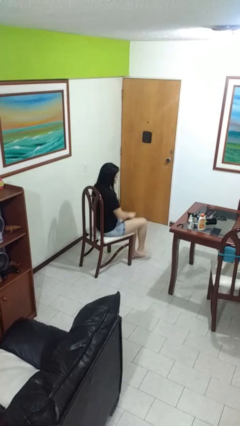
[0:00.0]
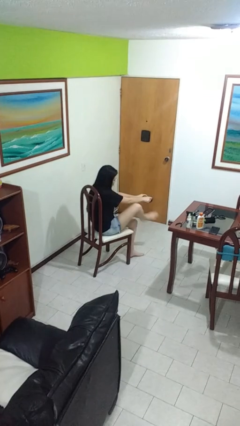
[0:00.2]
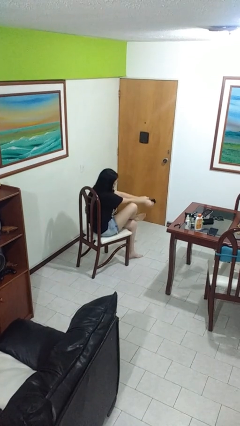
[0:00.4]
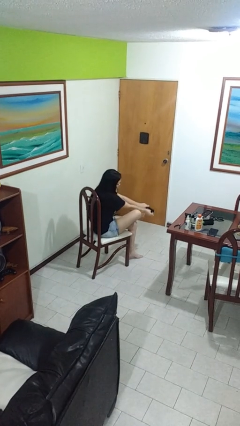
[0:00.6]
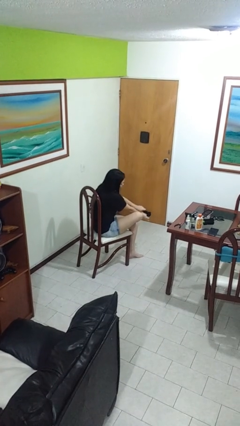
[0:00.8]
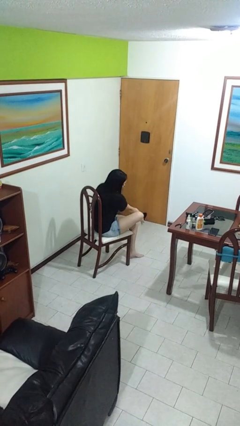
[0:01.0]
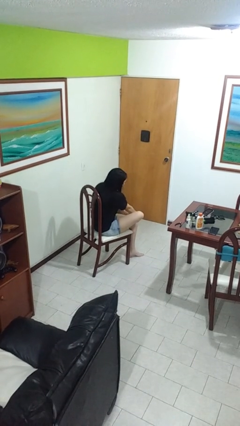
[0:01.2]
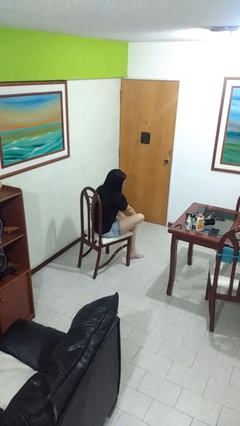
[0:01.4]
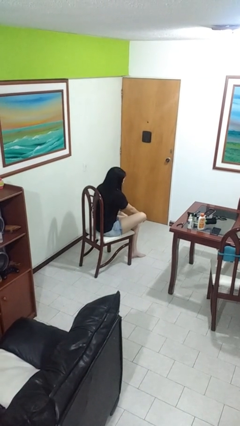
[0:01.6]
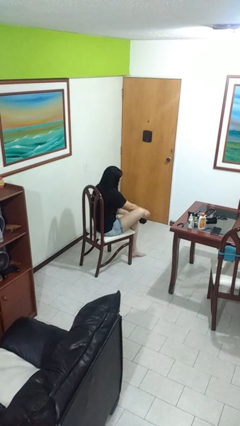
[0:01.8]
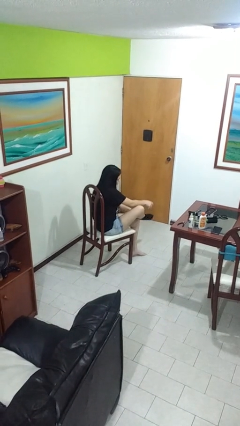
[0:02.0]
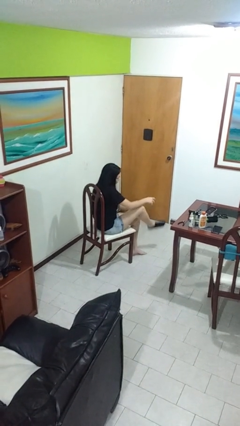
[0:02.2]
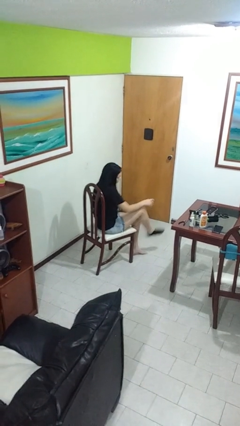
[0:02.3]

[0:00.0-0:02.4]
person puts on socks

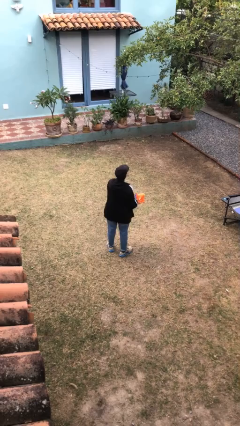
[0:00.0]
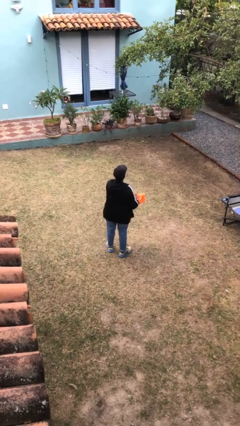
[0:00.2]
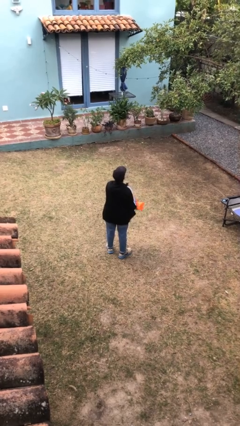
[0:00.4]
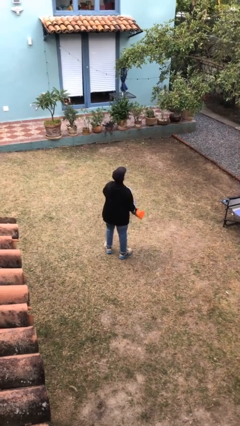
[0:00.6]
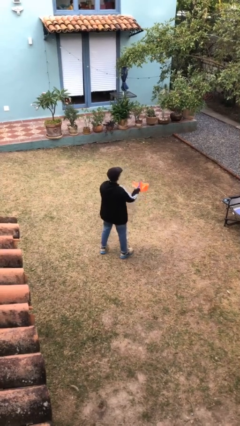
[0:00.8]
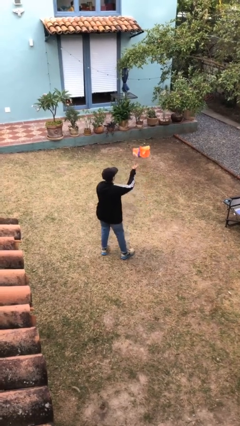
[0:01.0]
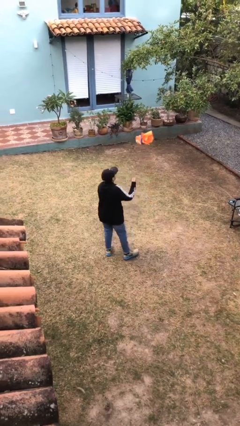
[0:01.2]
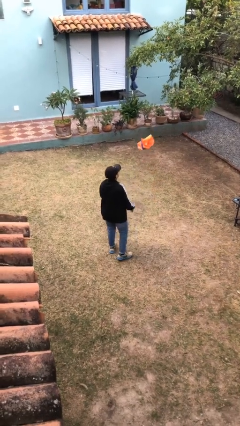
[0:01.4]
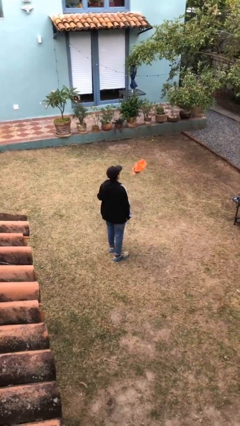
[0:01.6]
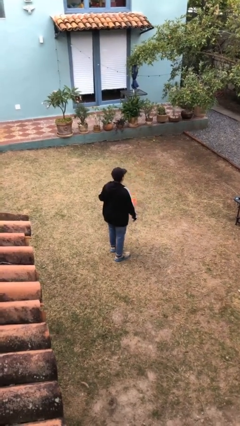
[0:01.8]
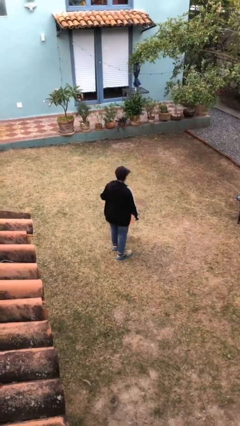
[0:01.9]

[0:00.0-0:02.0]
person throws object into air

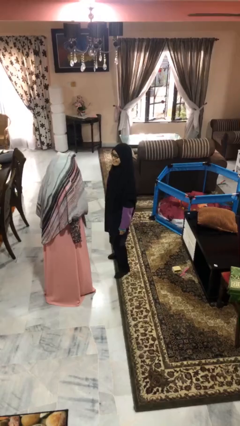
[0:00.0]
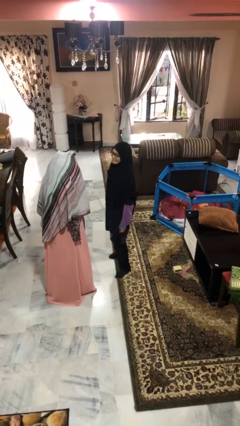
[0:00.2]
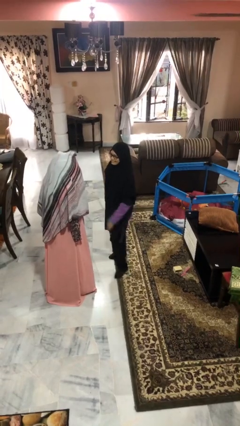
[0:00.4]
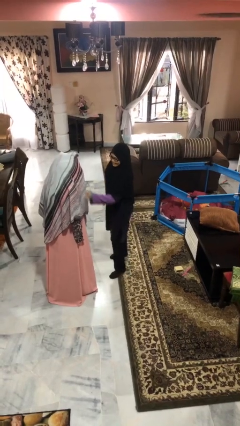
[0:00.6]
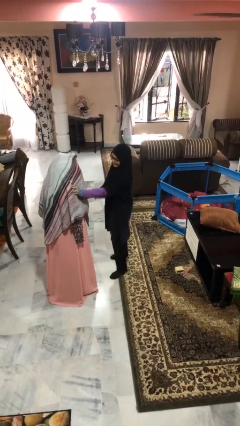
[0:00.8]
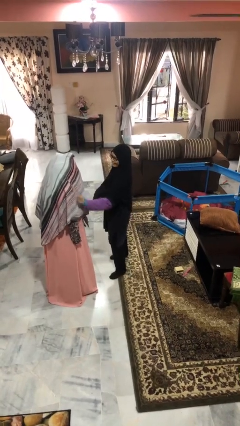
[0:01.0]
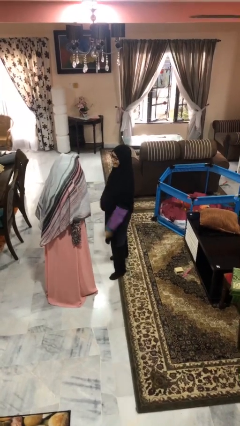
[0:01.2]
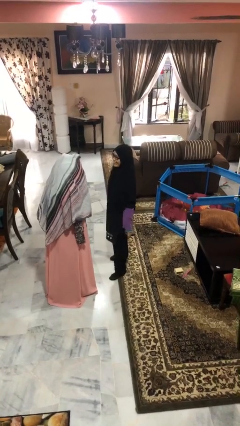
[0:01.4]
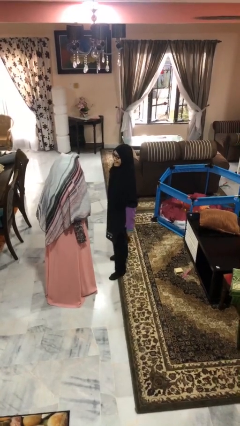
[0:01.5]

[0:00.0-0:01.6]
person shoves person

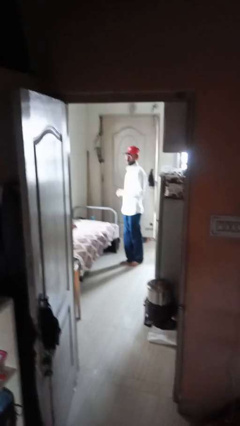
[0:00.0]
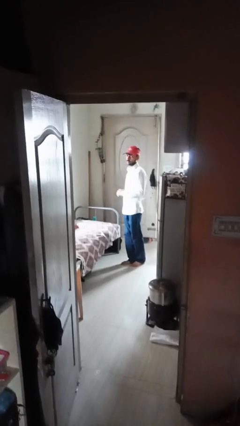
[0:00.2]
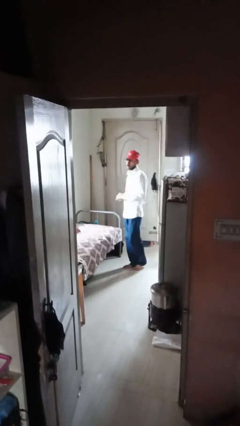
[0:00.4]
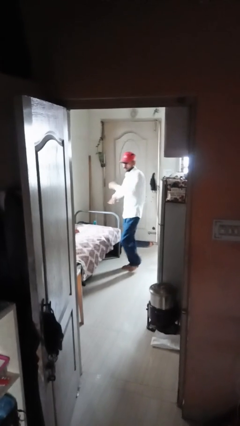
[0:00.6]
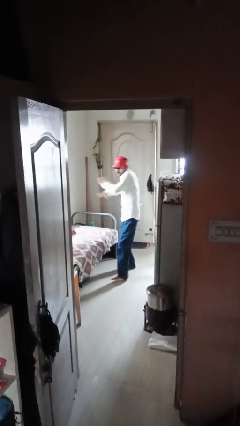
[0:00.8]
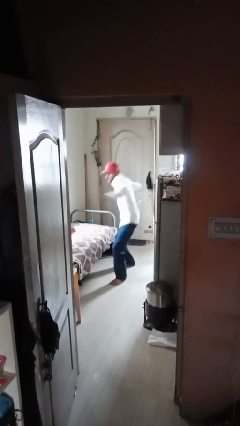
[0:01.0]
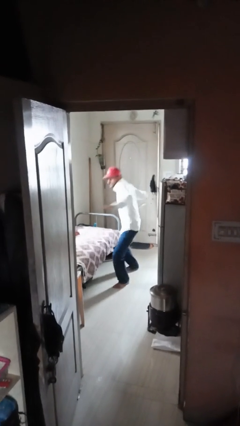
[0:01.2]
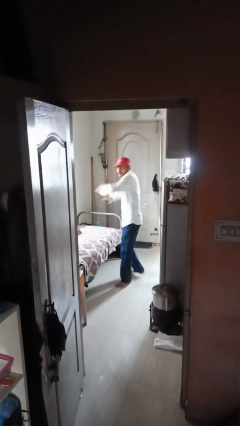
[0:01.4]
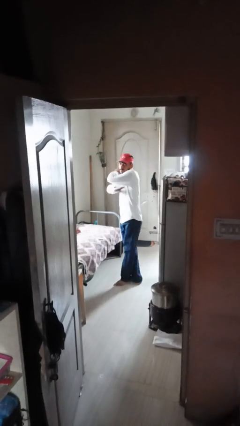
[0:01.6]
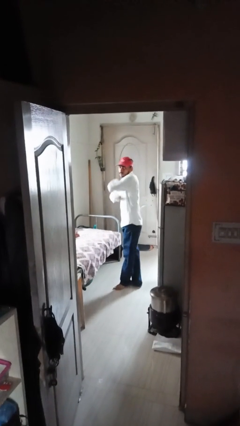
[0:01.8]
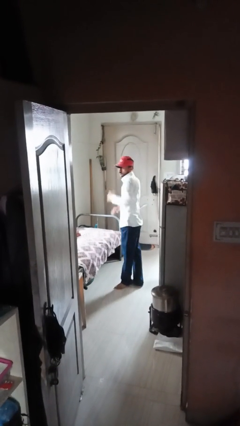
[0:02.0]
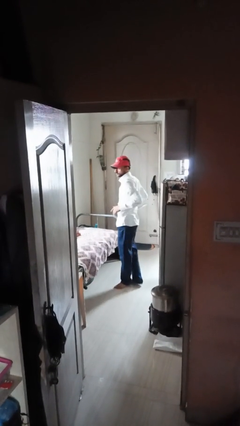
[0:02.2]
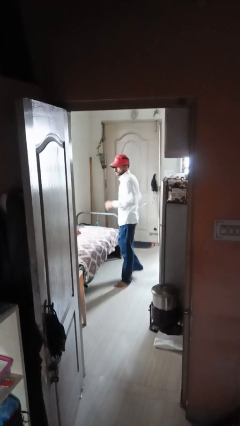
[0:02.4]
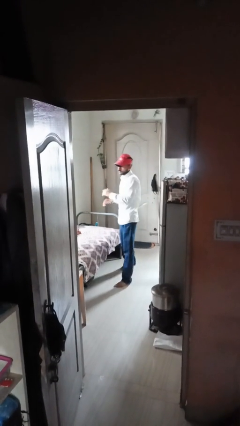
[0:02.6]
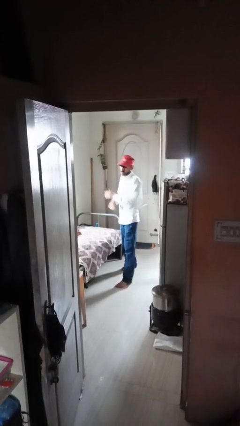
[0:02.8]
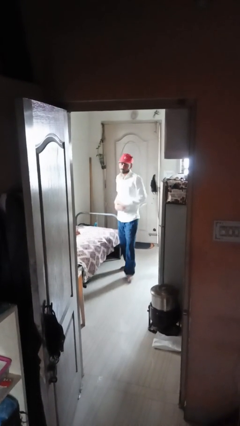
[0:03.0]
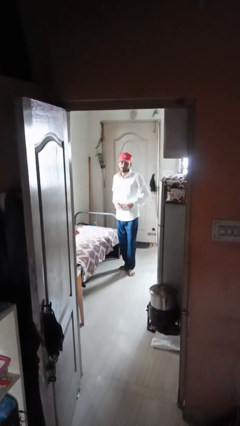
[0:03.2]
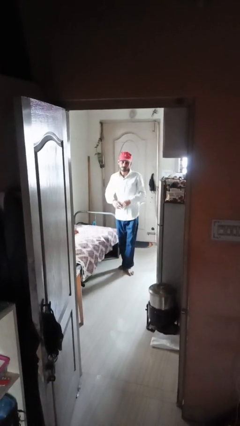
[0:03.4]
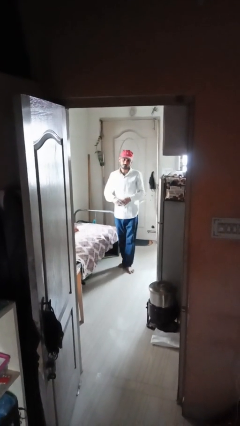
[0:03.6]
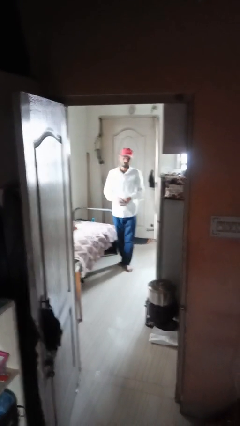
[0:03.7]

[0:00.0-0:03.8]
person karate chop

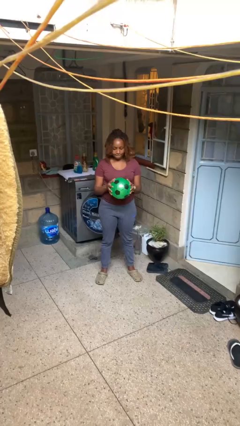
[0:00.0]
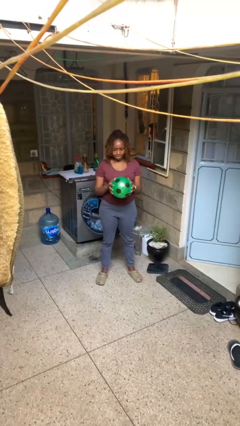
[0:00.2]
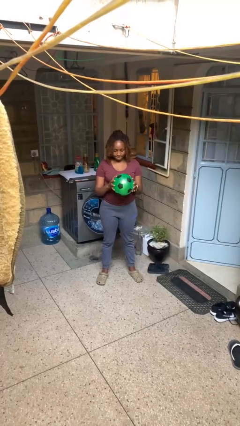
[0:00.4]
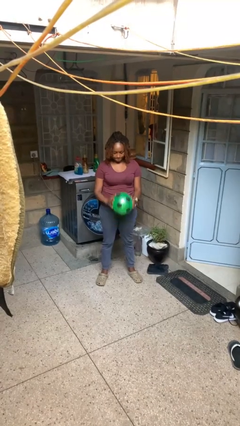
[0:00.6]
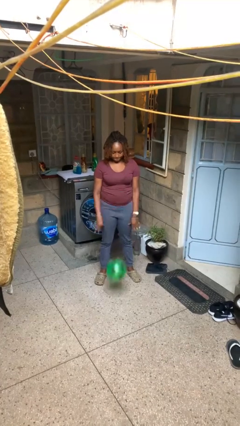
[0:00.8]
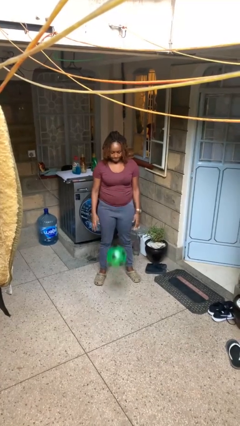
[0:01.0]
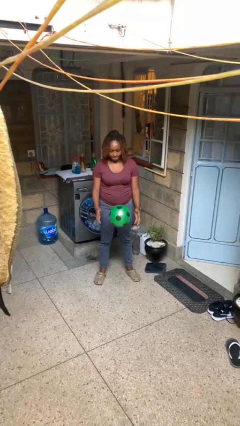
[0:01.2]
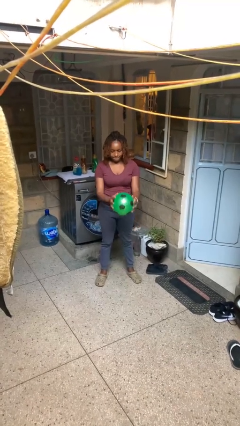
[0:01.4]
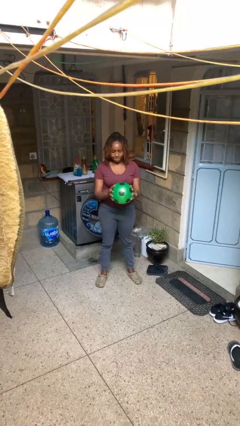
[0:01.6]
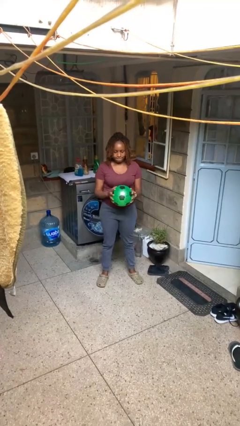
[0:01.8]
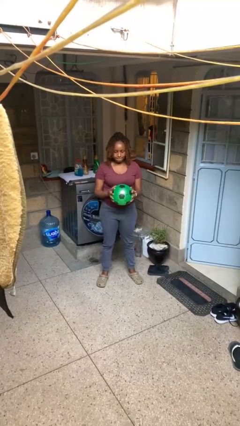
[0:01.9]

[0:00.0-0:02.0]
person bounces ball on floor

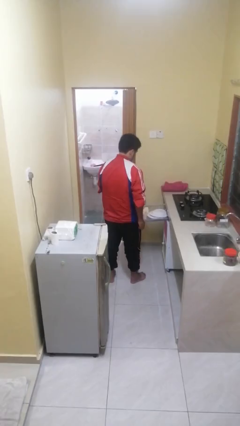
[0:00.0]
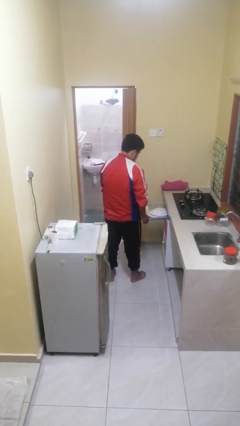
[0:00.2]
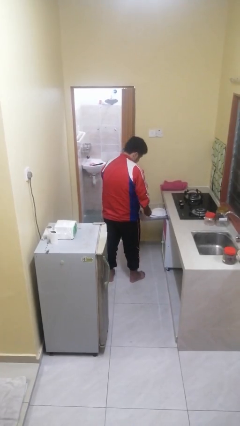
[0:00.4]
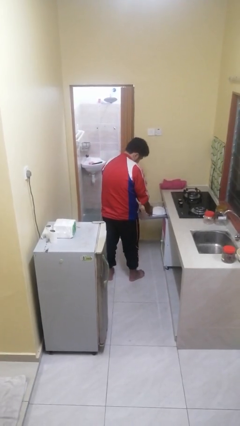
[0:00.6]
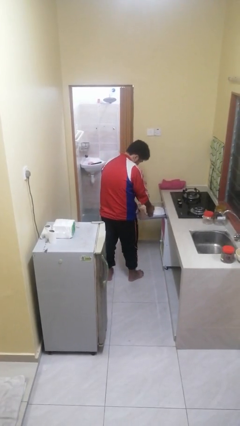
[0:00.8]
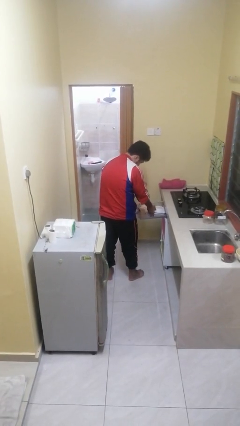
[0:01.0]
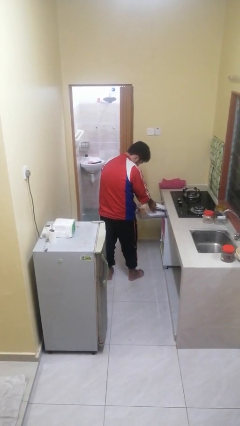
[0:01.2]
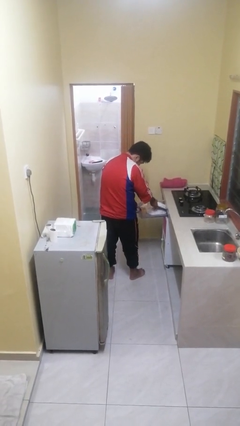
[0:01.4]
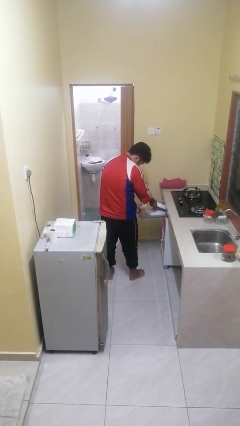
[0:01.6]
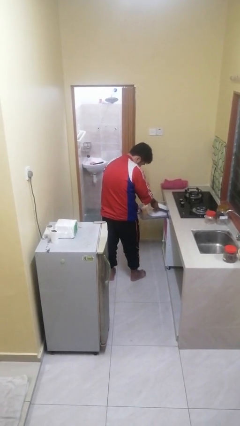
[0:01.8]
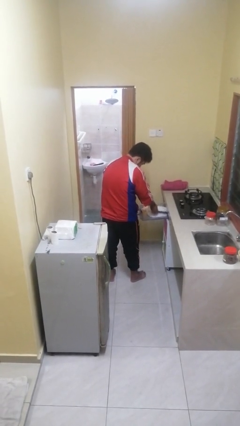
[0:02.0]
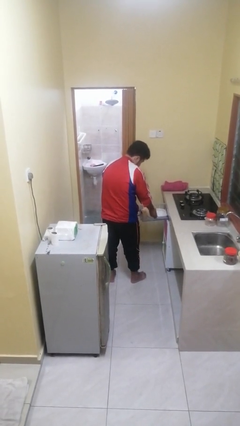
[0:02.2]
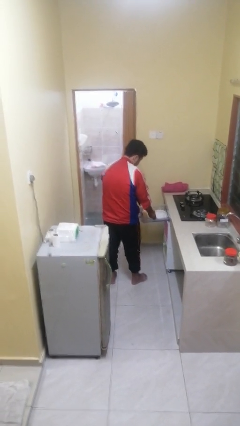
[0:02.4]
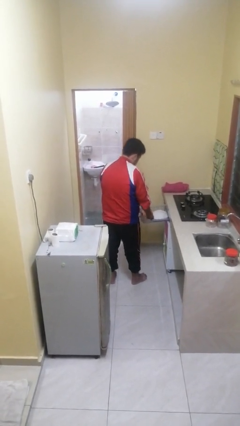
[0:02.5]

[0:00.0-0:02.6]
person searches in kitchen drawer

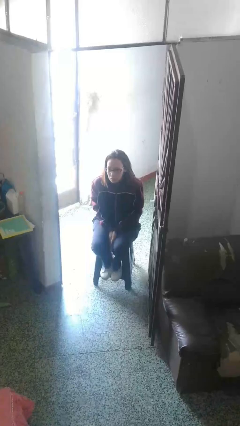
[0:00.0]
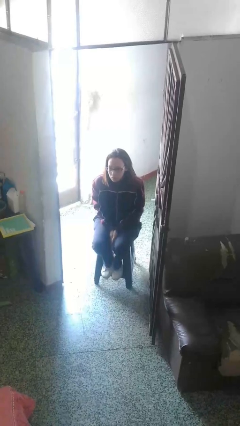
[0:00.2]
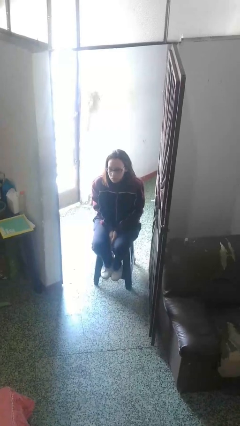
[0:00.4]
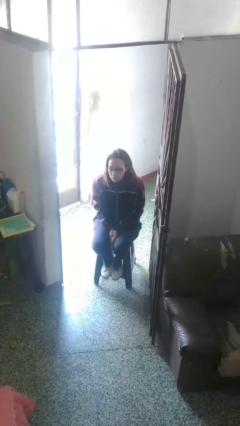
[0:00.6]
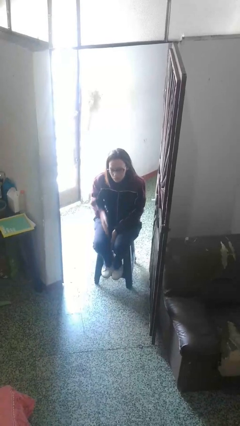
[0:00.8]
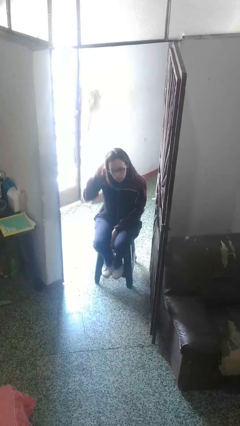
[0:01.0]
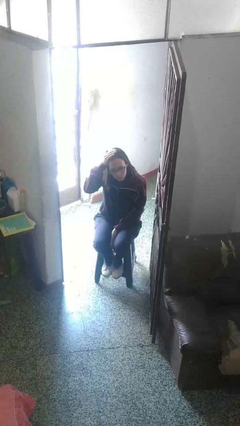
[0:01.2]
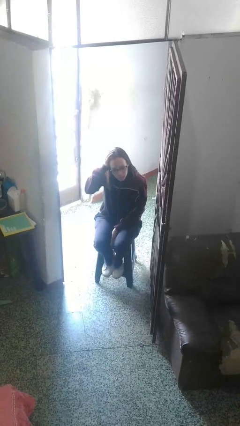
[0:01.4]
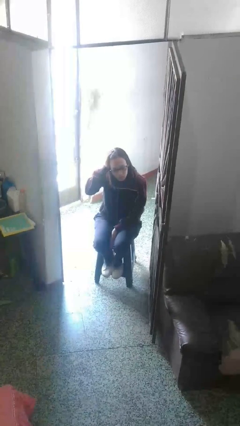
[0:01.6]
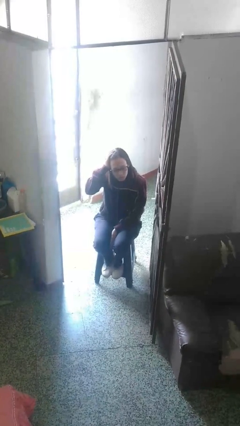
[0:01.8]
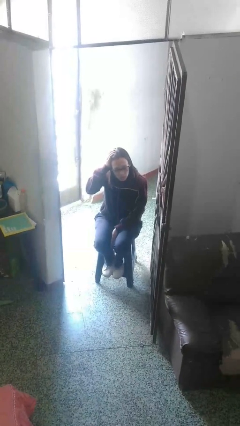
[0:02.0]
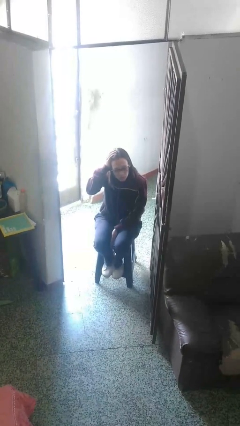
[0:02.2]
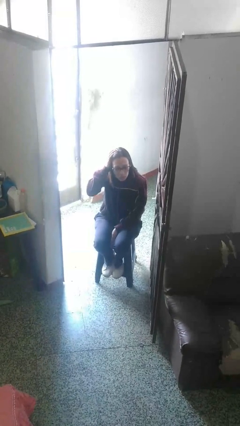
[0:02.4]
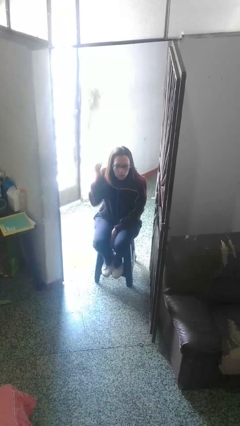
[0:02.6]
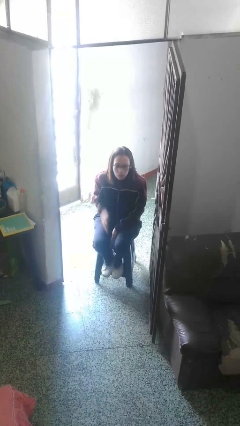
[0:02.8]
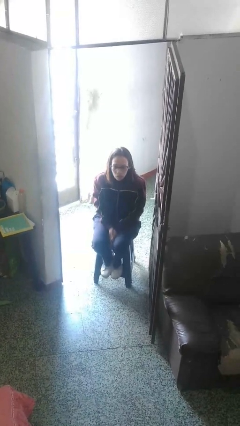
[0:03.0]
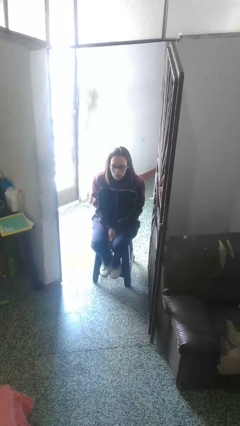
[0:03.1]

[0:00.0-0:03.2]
person pats head
